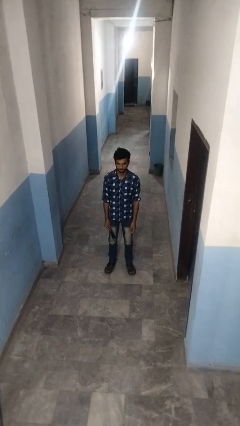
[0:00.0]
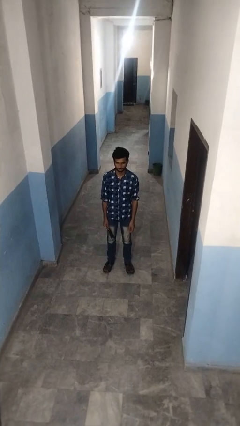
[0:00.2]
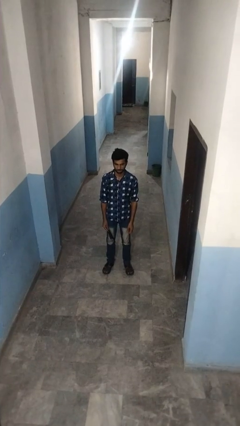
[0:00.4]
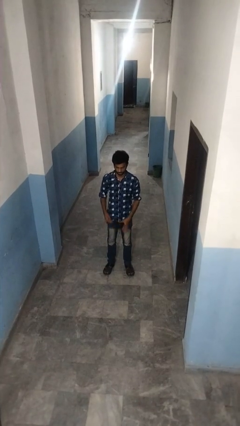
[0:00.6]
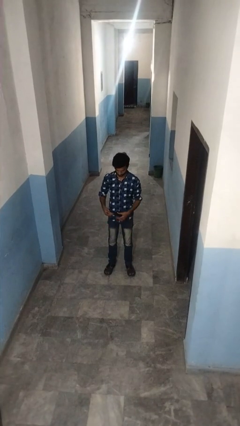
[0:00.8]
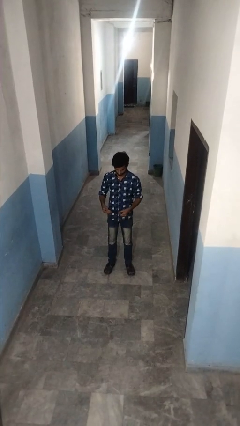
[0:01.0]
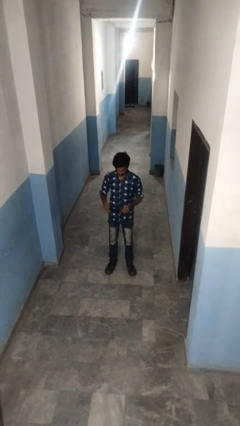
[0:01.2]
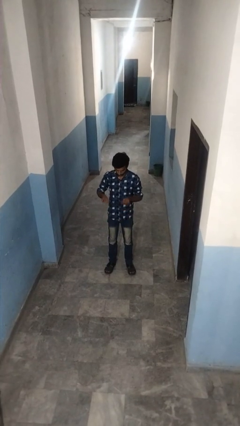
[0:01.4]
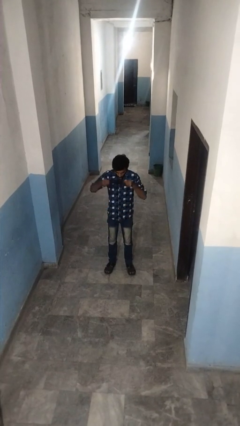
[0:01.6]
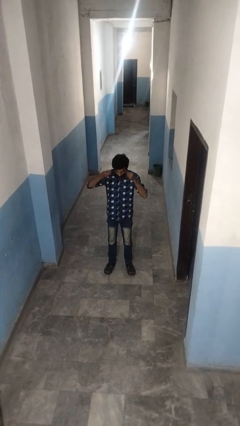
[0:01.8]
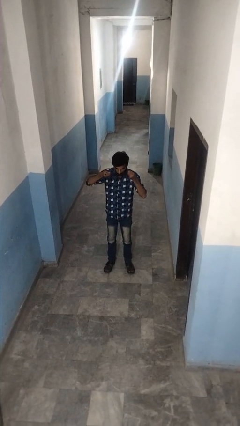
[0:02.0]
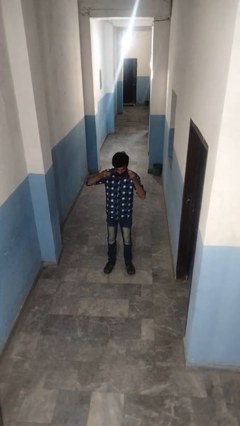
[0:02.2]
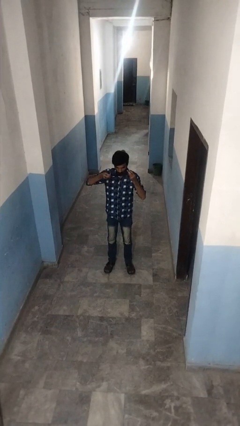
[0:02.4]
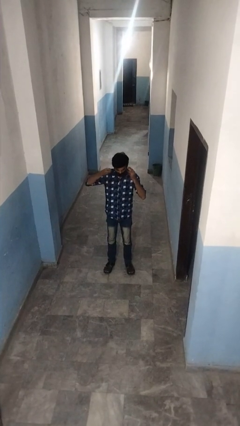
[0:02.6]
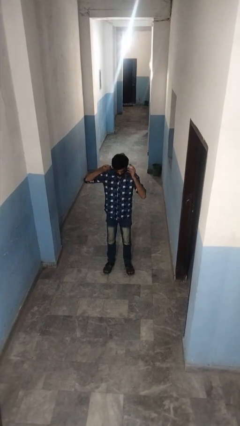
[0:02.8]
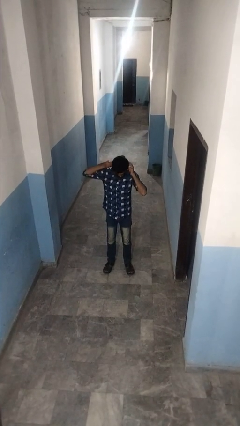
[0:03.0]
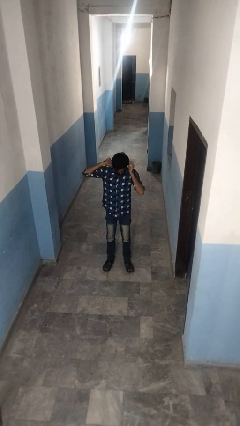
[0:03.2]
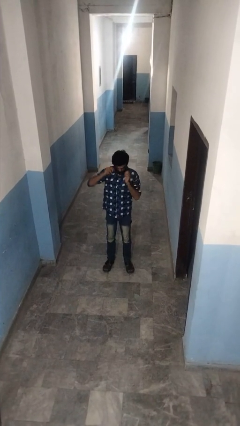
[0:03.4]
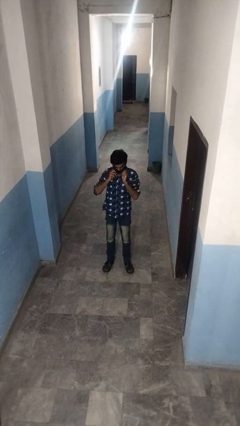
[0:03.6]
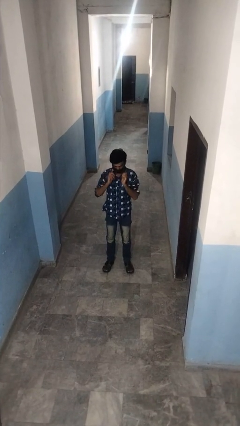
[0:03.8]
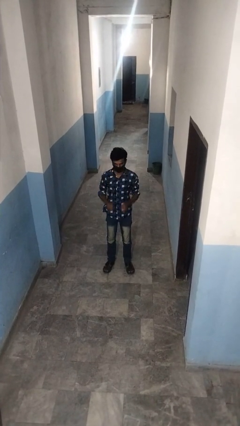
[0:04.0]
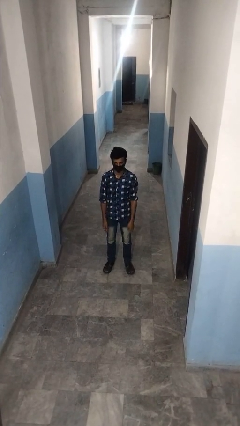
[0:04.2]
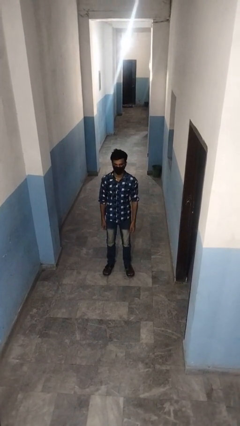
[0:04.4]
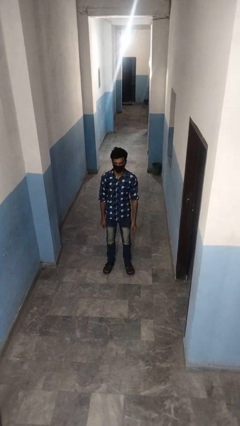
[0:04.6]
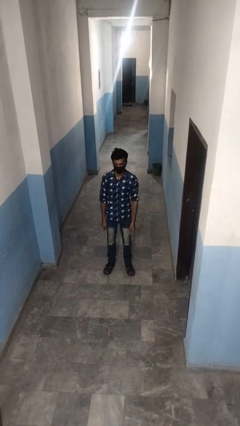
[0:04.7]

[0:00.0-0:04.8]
person puts on facemask

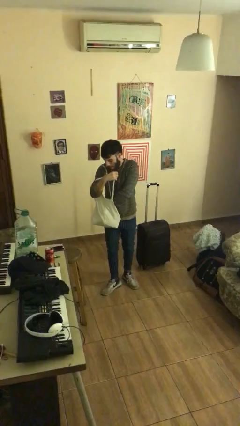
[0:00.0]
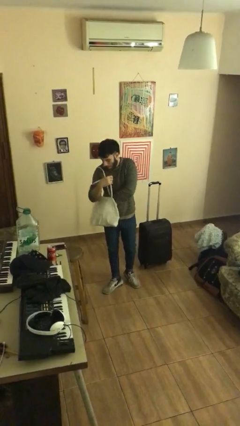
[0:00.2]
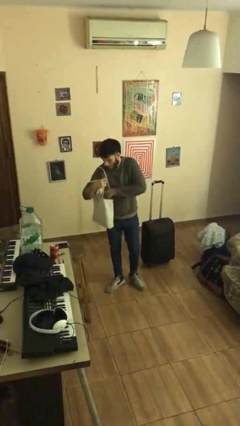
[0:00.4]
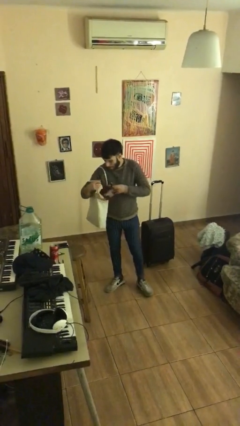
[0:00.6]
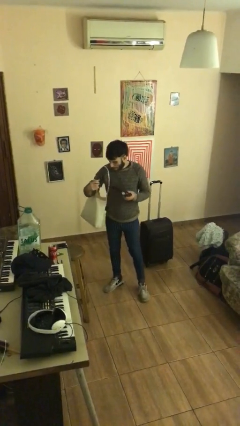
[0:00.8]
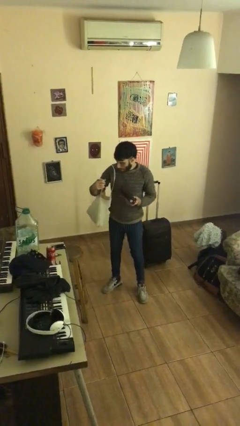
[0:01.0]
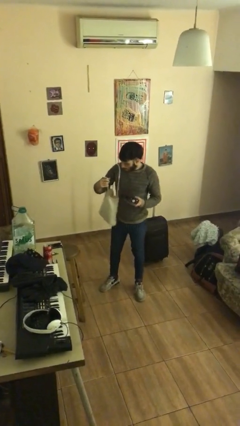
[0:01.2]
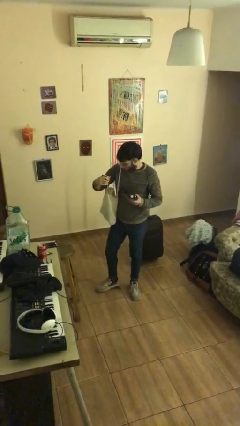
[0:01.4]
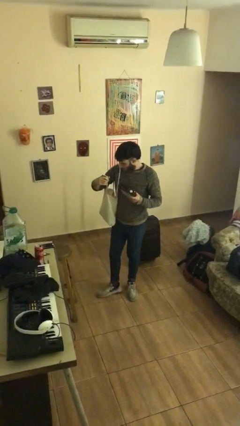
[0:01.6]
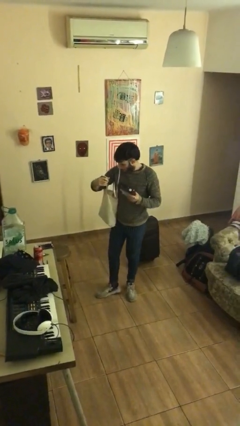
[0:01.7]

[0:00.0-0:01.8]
person takes object from purse

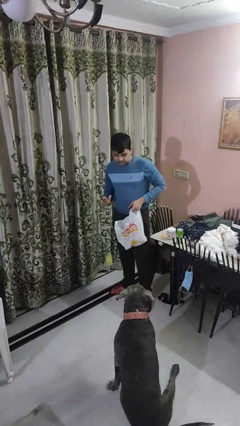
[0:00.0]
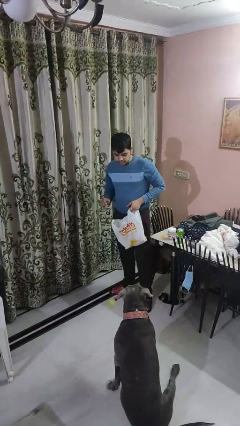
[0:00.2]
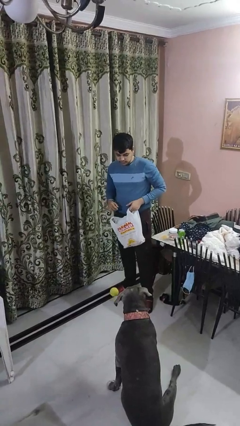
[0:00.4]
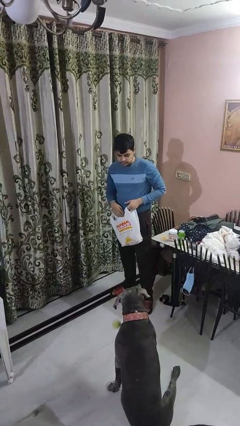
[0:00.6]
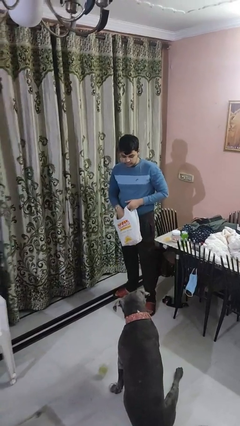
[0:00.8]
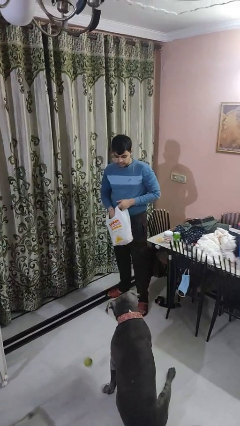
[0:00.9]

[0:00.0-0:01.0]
person throws object to dog

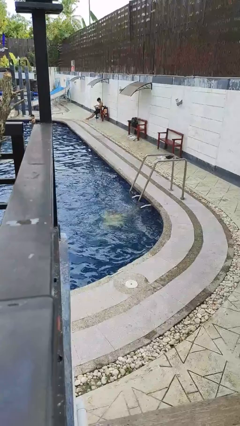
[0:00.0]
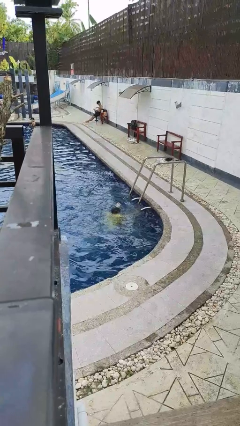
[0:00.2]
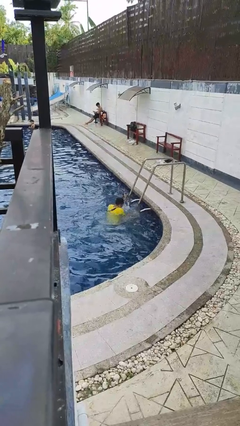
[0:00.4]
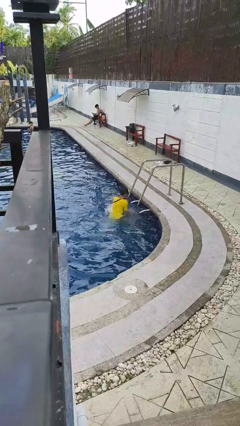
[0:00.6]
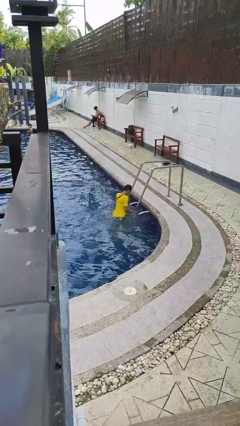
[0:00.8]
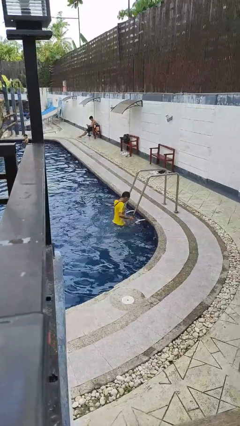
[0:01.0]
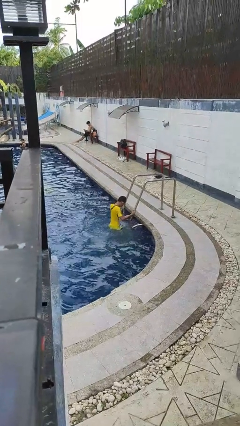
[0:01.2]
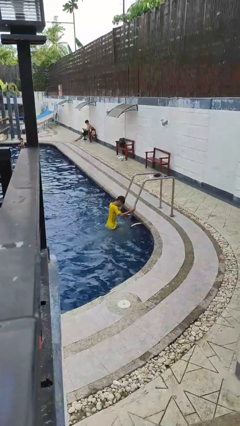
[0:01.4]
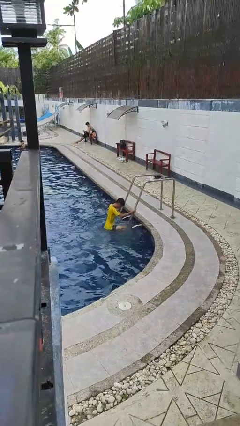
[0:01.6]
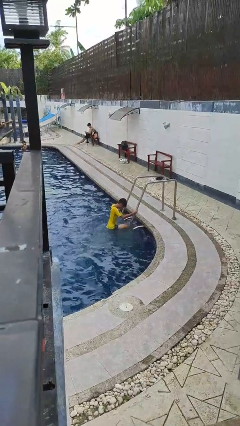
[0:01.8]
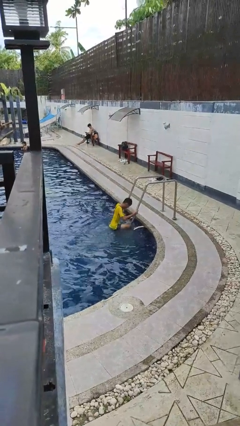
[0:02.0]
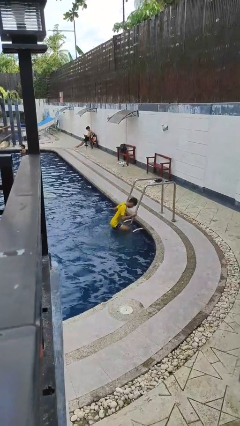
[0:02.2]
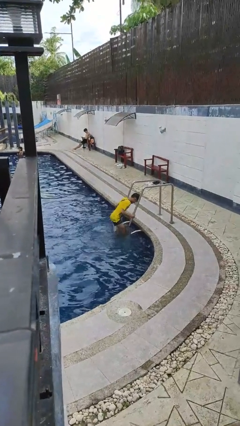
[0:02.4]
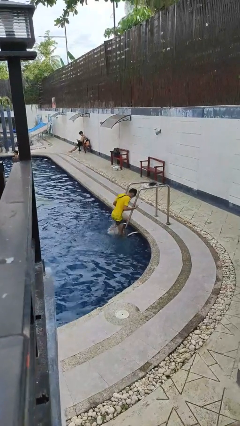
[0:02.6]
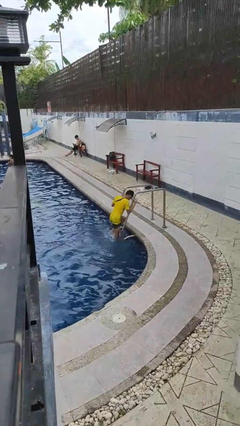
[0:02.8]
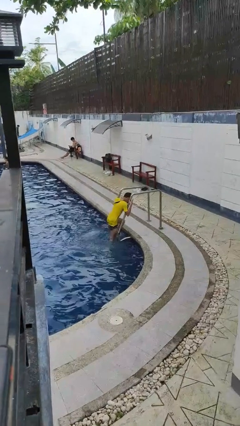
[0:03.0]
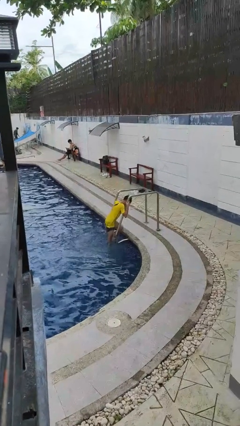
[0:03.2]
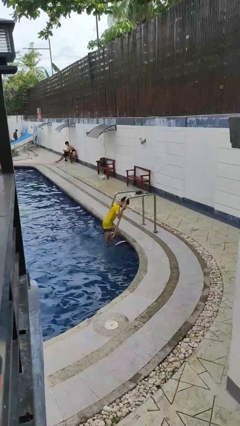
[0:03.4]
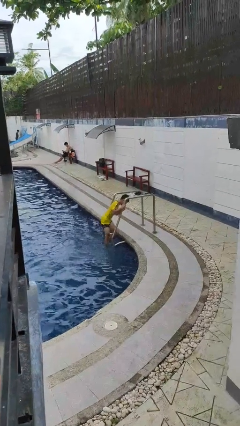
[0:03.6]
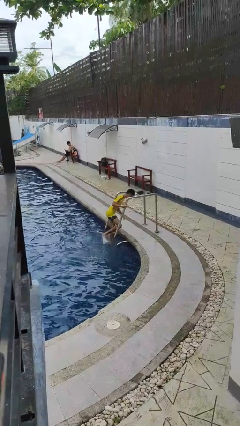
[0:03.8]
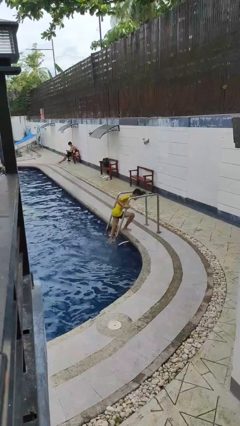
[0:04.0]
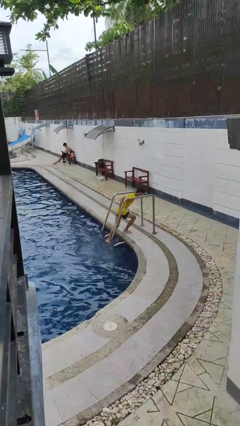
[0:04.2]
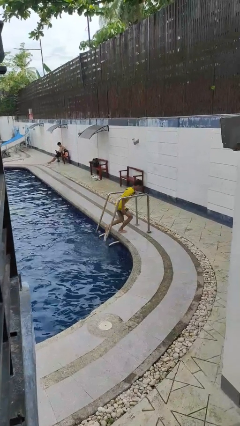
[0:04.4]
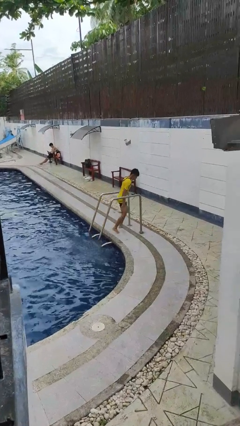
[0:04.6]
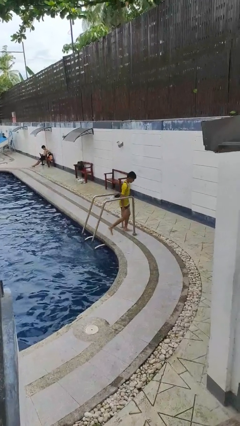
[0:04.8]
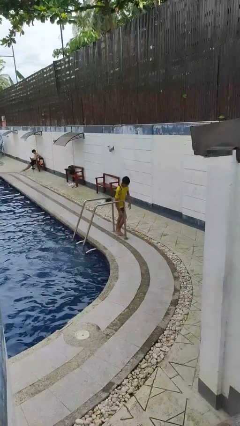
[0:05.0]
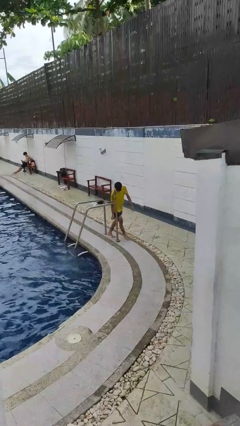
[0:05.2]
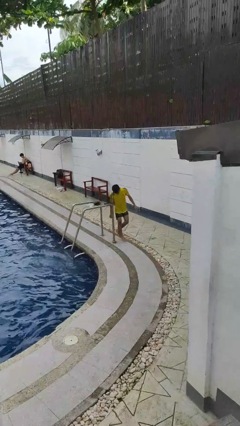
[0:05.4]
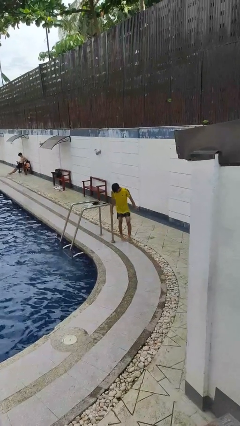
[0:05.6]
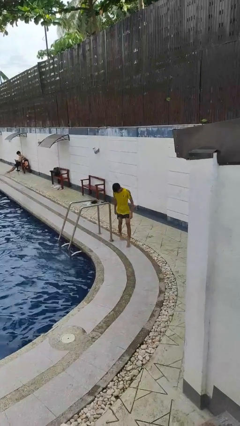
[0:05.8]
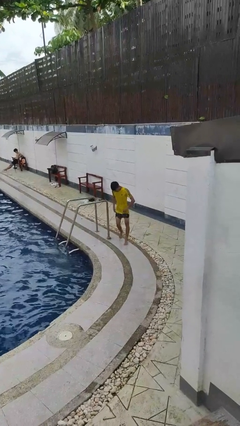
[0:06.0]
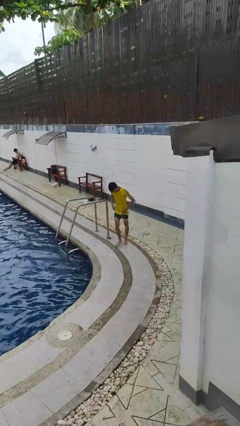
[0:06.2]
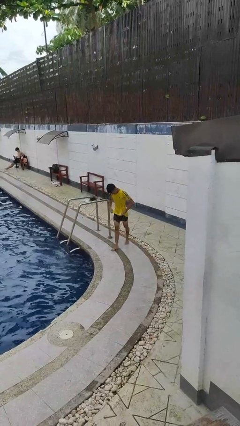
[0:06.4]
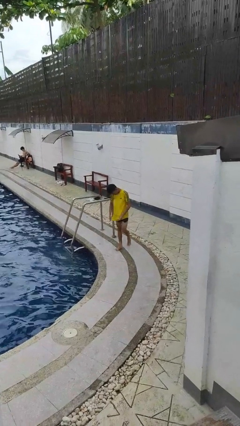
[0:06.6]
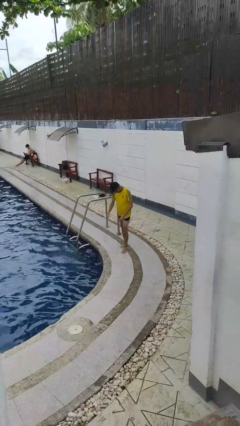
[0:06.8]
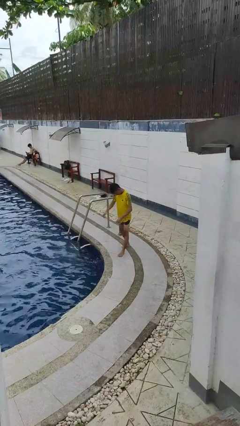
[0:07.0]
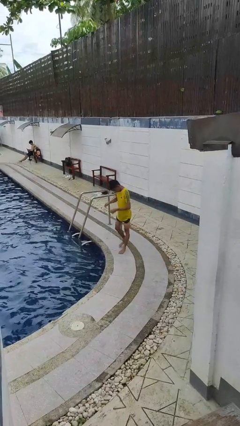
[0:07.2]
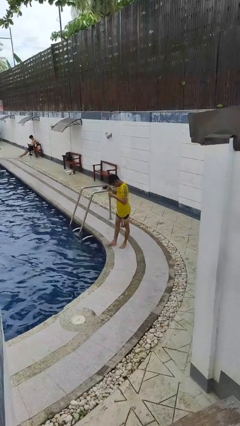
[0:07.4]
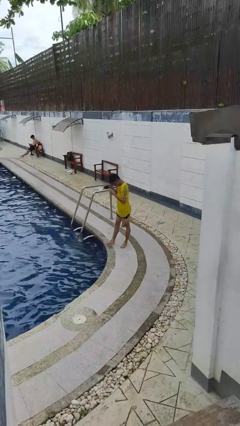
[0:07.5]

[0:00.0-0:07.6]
person exits pool

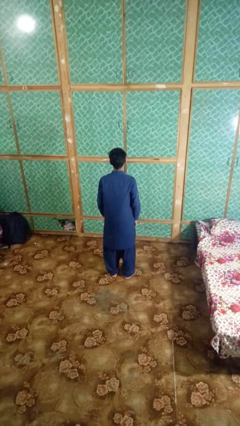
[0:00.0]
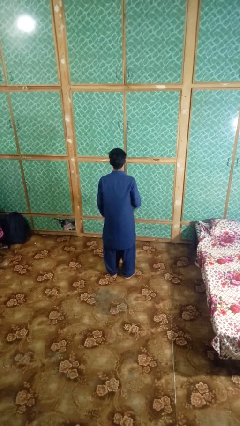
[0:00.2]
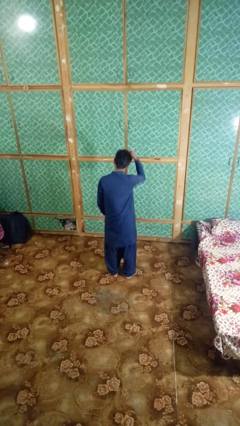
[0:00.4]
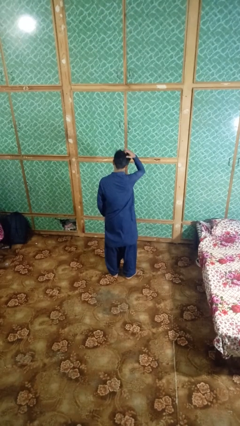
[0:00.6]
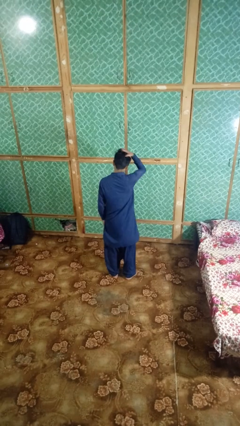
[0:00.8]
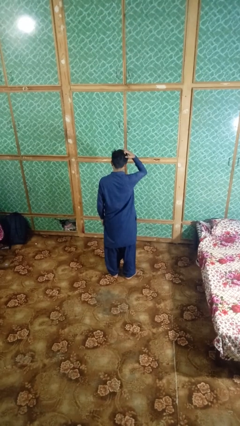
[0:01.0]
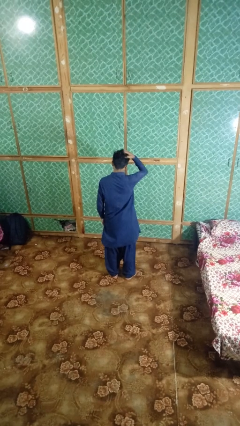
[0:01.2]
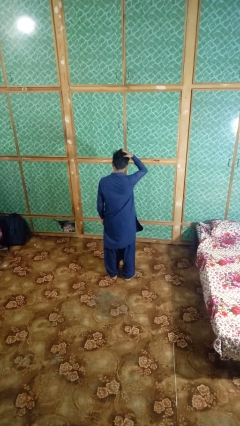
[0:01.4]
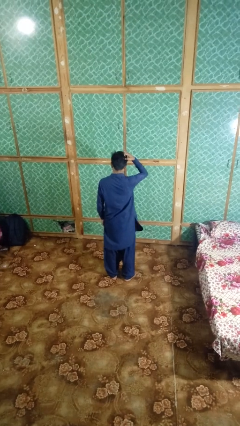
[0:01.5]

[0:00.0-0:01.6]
person strokes hair

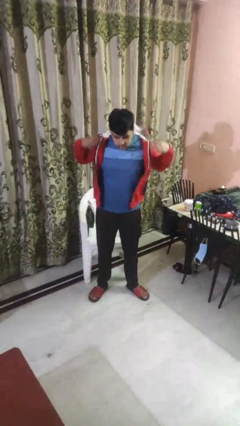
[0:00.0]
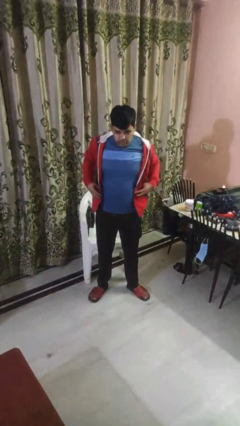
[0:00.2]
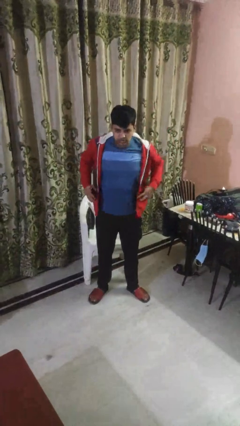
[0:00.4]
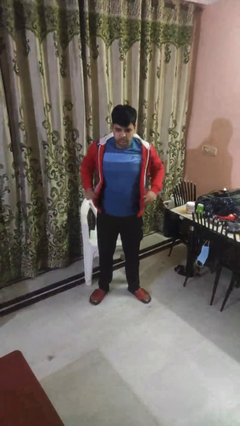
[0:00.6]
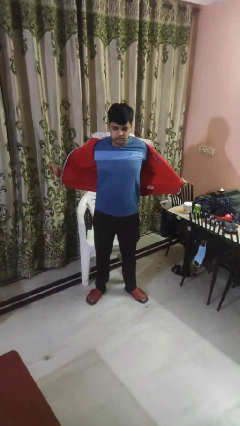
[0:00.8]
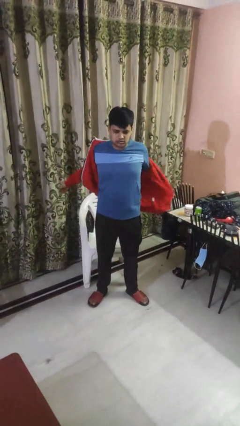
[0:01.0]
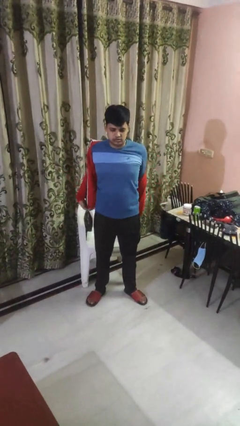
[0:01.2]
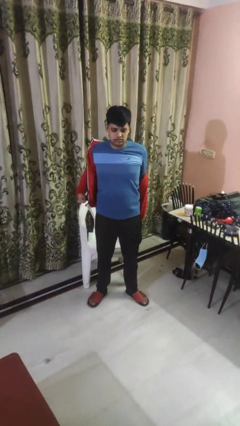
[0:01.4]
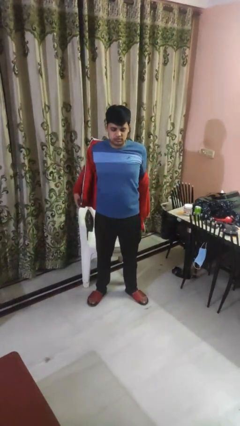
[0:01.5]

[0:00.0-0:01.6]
person takes off hoodie
